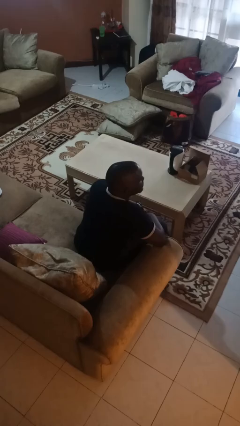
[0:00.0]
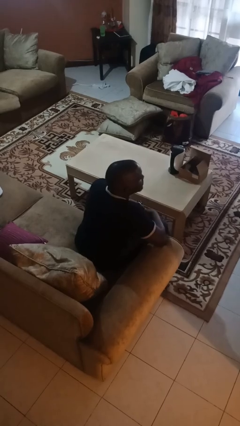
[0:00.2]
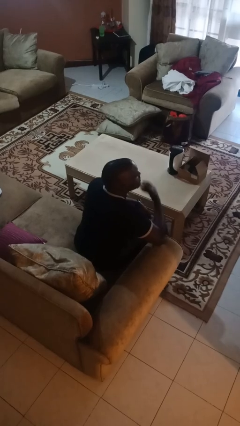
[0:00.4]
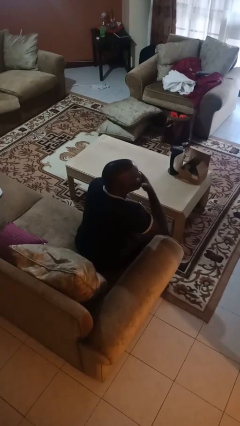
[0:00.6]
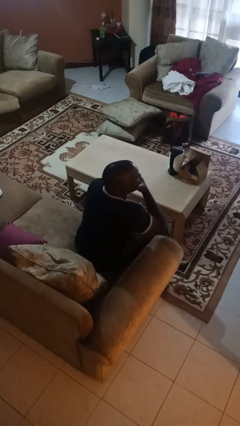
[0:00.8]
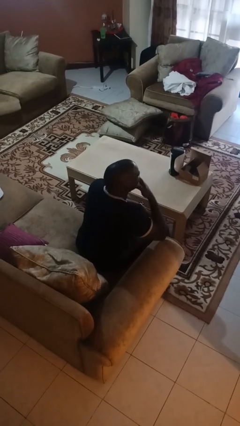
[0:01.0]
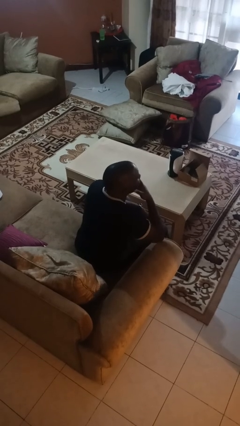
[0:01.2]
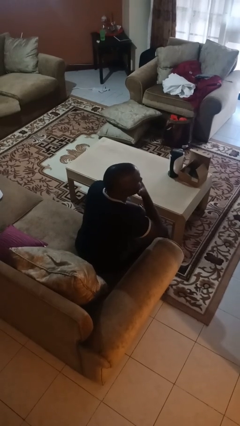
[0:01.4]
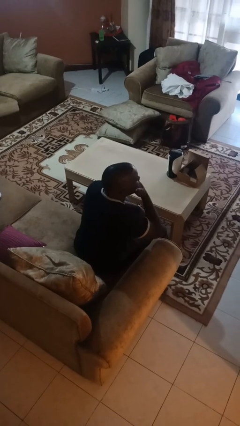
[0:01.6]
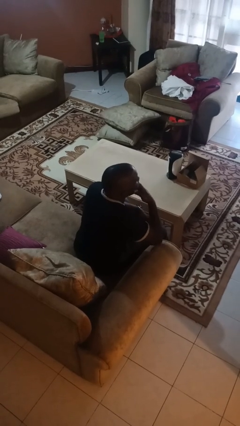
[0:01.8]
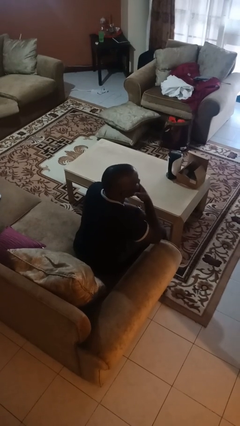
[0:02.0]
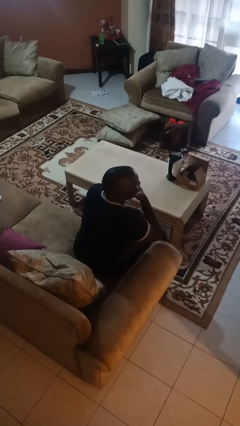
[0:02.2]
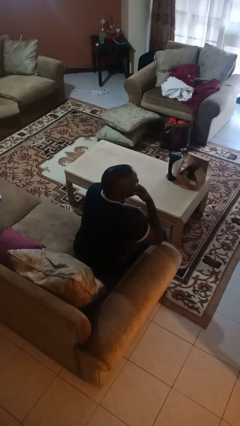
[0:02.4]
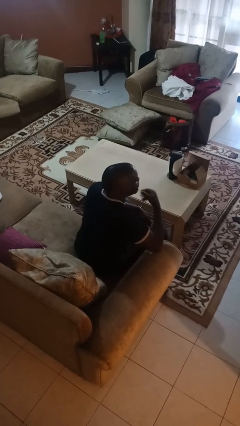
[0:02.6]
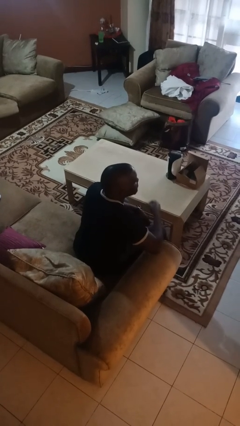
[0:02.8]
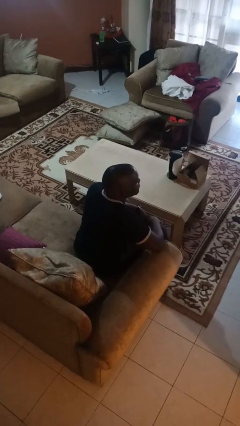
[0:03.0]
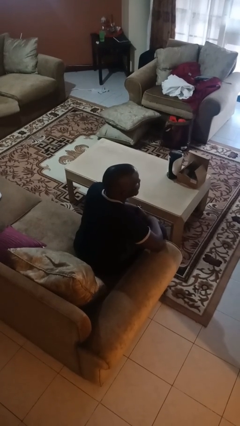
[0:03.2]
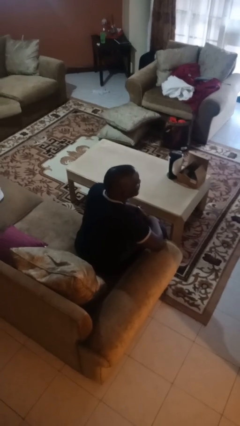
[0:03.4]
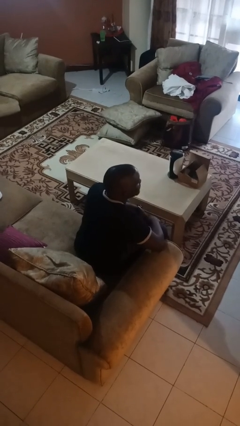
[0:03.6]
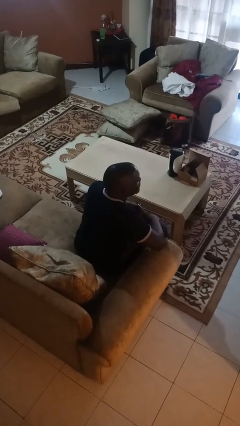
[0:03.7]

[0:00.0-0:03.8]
person strokes chin

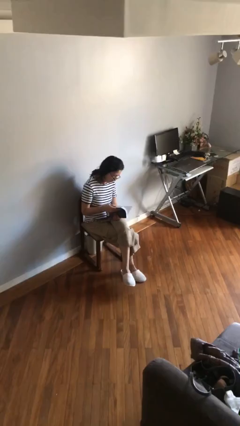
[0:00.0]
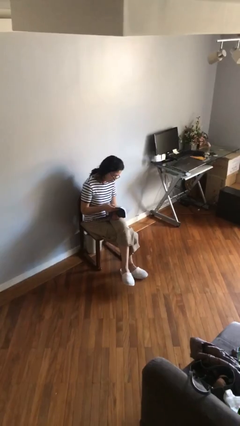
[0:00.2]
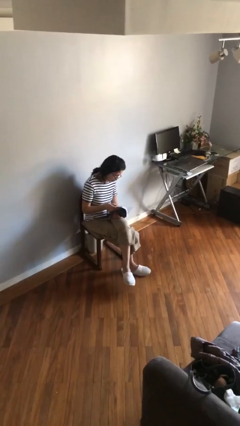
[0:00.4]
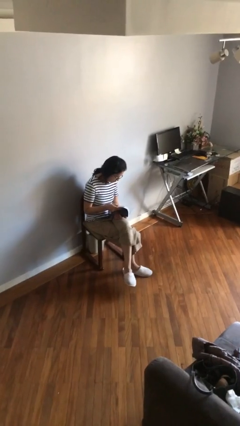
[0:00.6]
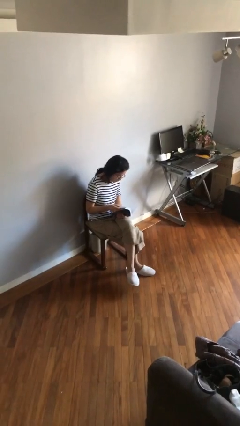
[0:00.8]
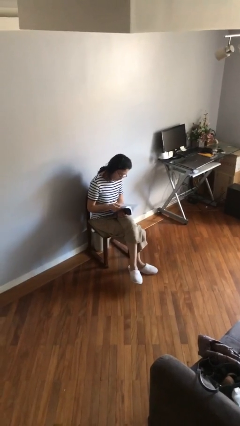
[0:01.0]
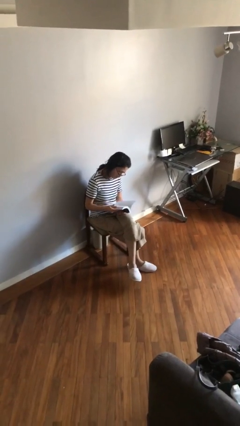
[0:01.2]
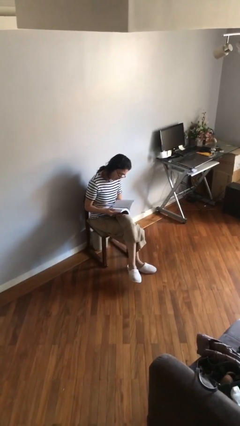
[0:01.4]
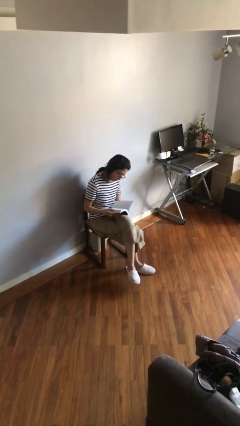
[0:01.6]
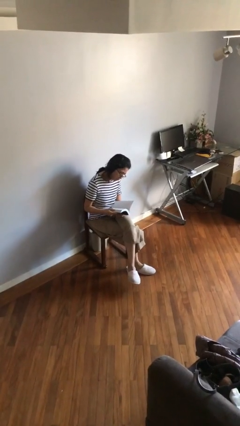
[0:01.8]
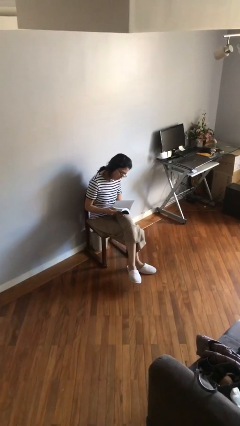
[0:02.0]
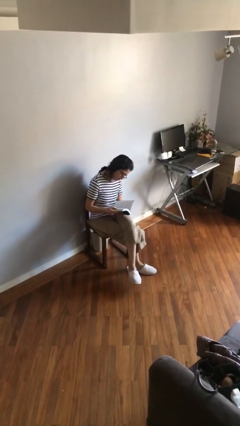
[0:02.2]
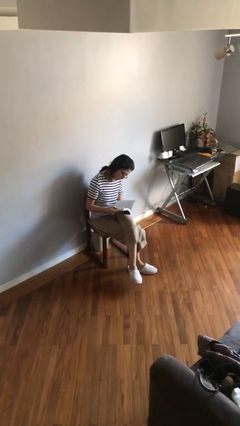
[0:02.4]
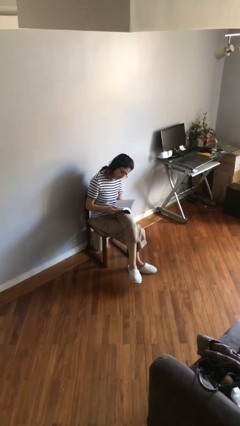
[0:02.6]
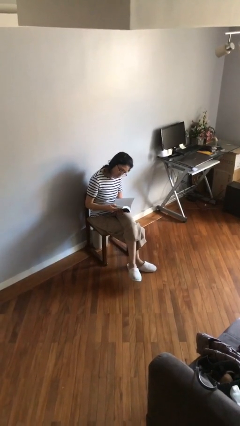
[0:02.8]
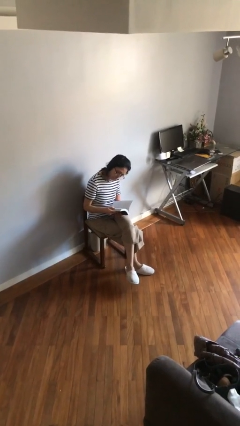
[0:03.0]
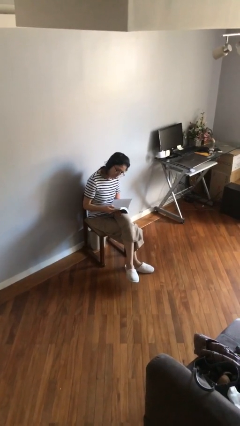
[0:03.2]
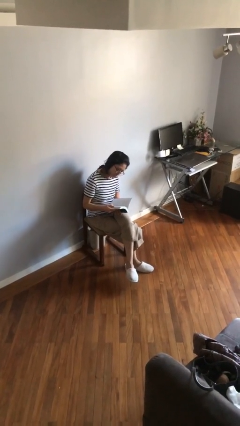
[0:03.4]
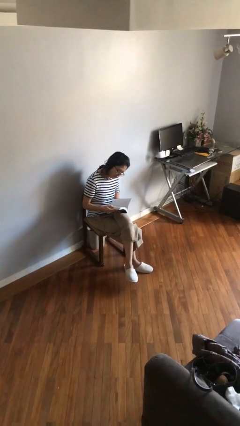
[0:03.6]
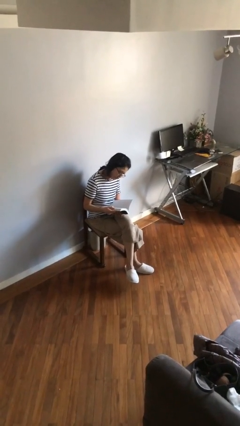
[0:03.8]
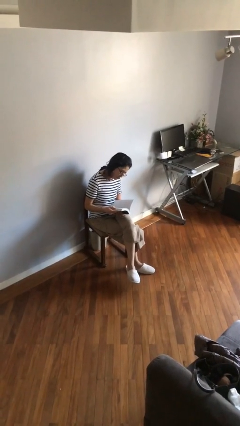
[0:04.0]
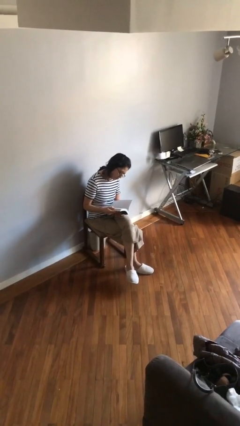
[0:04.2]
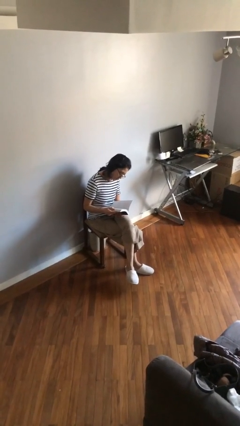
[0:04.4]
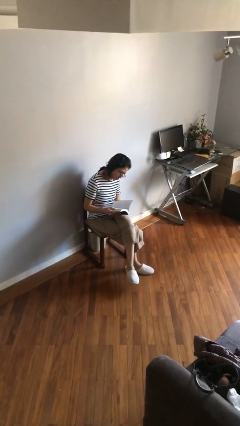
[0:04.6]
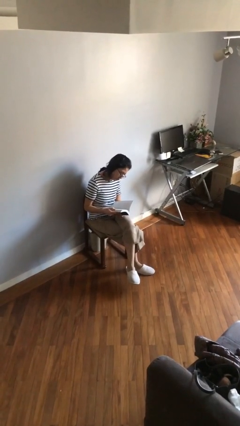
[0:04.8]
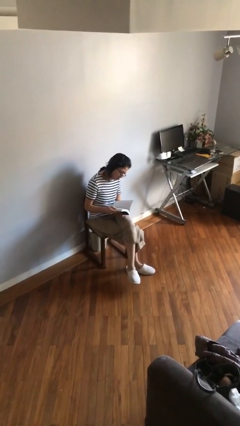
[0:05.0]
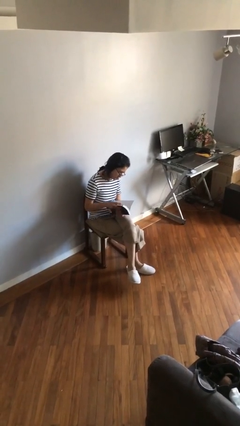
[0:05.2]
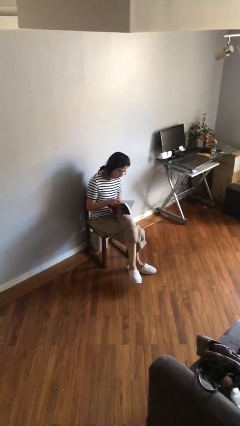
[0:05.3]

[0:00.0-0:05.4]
person reads document

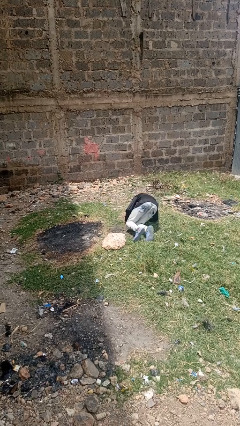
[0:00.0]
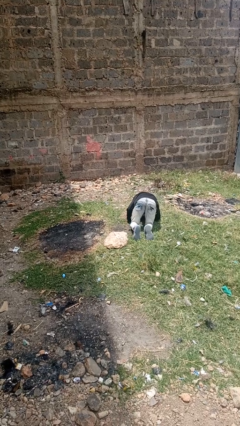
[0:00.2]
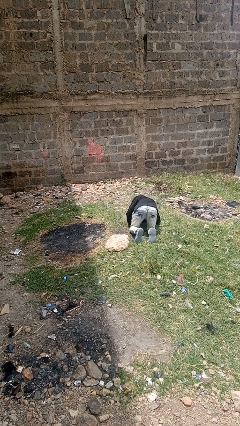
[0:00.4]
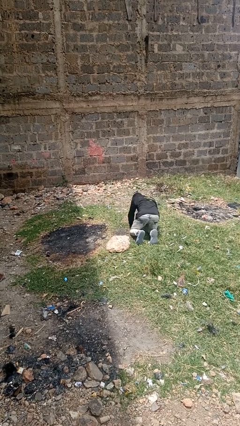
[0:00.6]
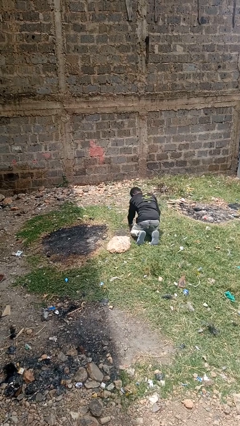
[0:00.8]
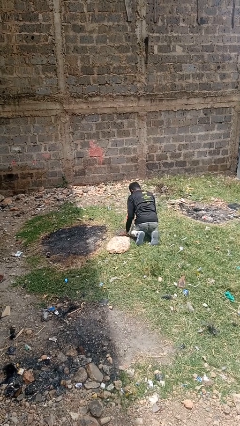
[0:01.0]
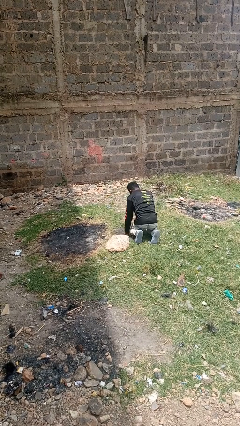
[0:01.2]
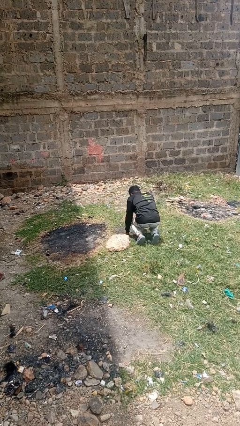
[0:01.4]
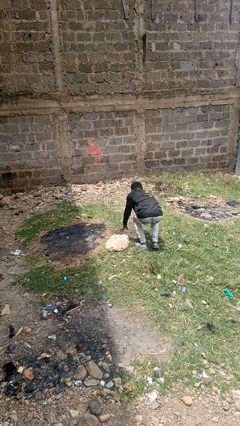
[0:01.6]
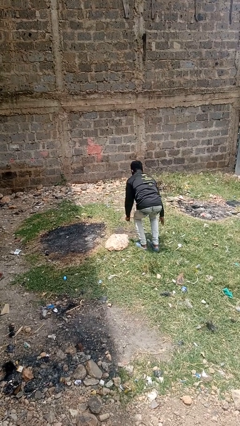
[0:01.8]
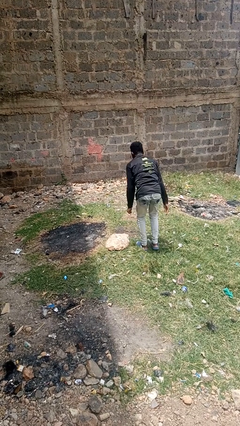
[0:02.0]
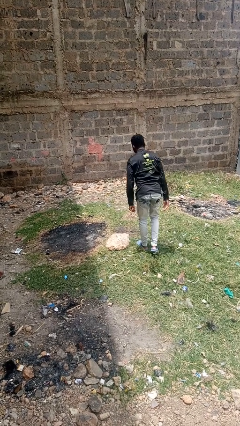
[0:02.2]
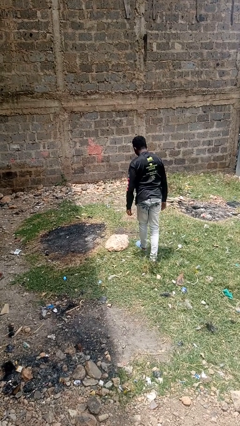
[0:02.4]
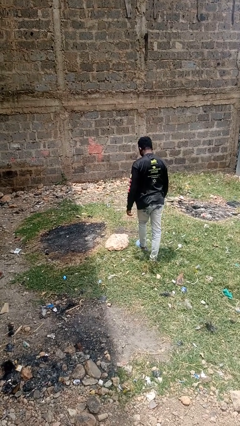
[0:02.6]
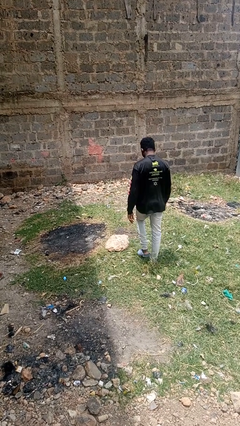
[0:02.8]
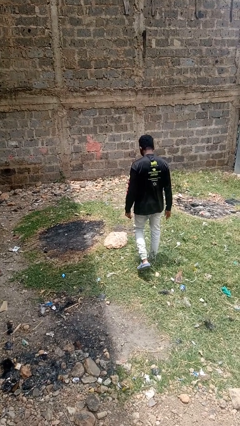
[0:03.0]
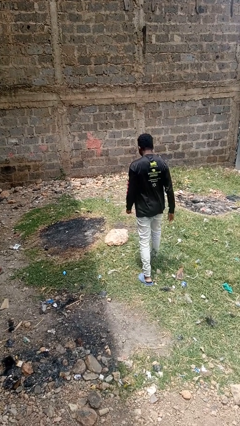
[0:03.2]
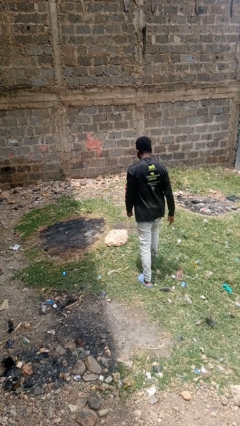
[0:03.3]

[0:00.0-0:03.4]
person stands up from floor

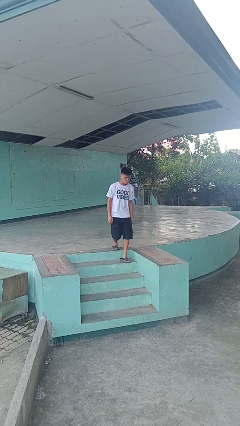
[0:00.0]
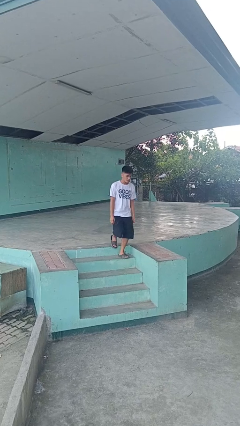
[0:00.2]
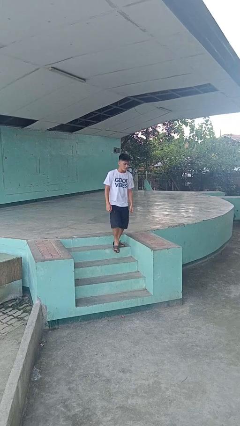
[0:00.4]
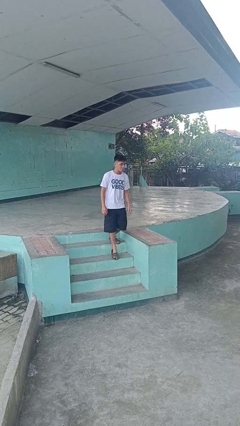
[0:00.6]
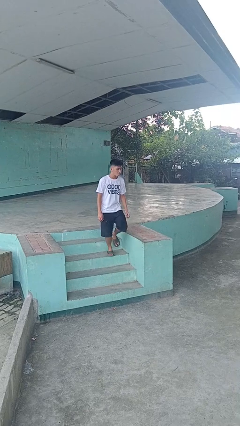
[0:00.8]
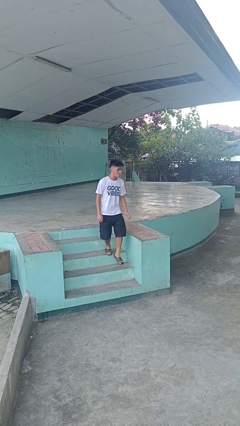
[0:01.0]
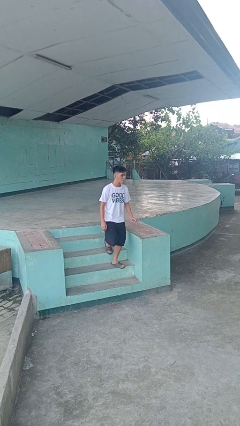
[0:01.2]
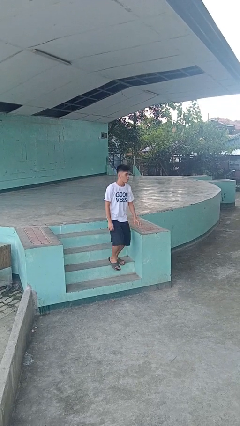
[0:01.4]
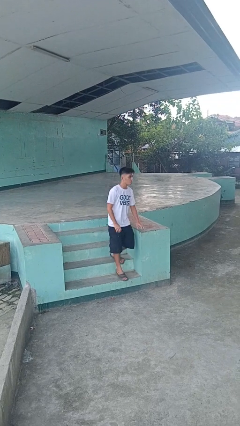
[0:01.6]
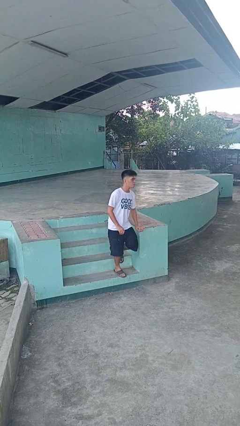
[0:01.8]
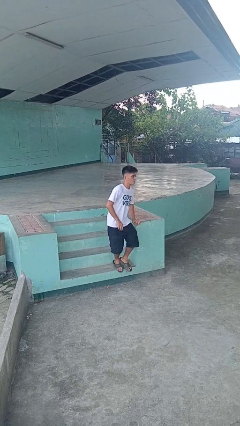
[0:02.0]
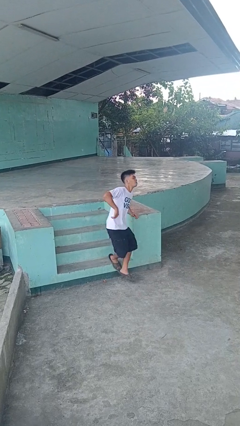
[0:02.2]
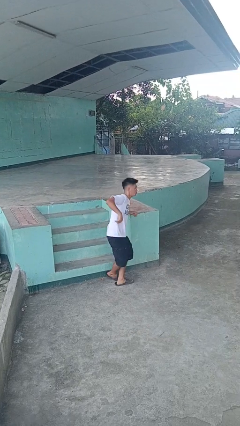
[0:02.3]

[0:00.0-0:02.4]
person climbs down stairs

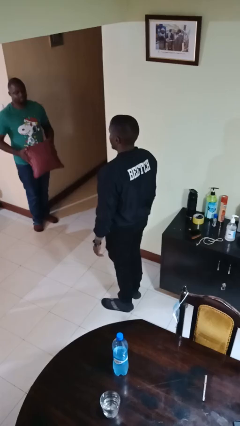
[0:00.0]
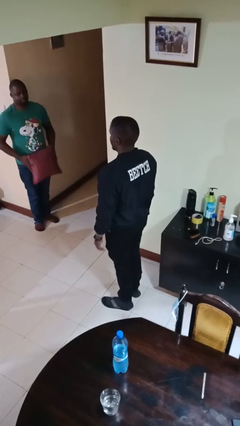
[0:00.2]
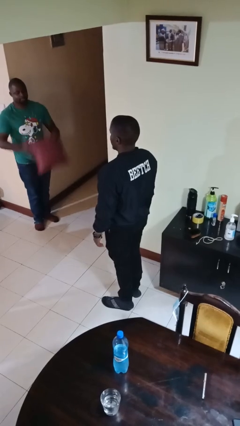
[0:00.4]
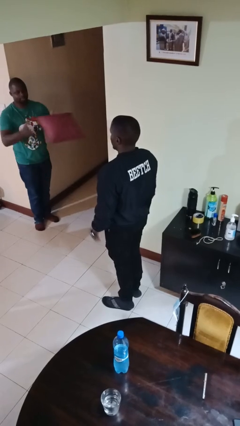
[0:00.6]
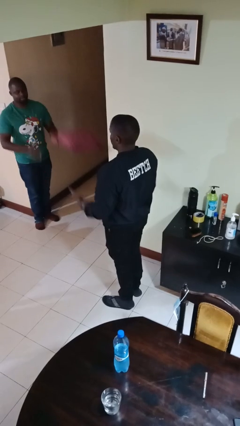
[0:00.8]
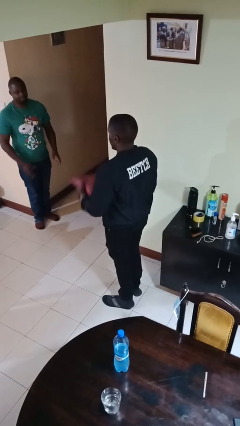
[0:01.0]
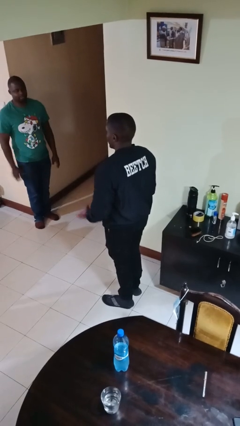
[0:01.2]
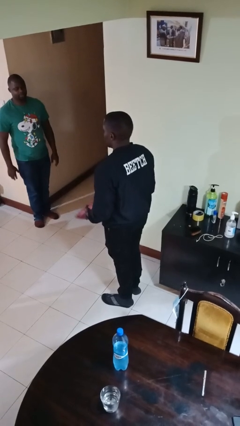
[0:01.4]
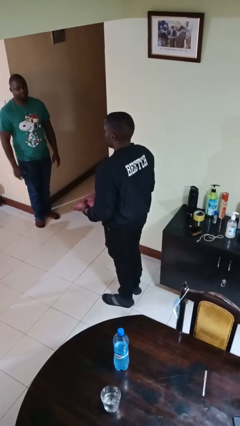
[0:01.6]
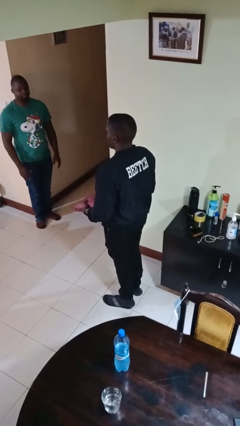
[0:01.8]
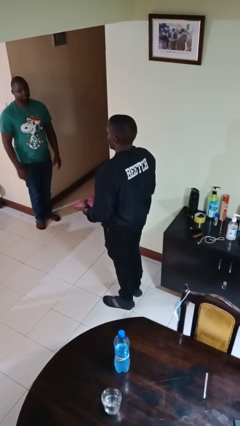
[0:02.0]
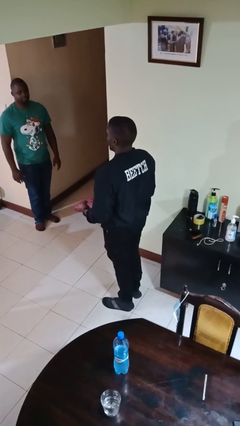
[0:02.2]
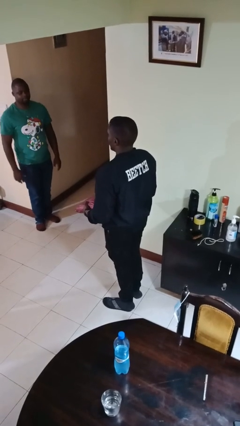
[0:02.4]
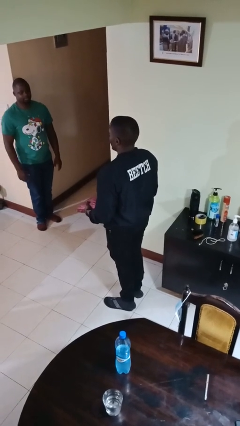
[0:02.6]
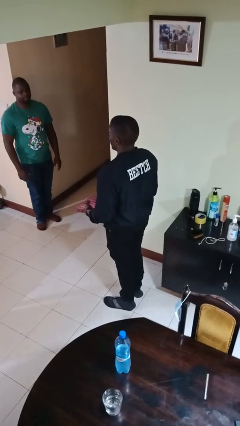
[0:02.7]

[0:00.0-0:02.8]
person catches object from person
